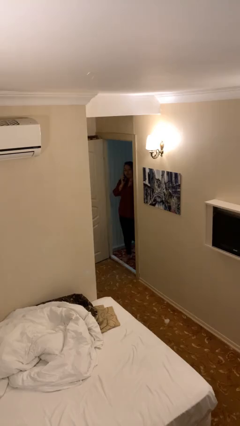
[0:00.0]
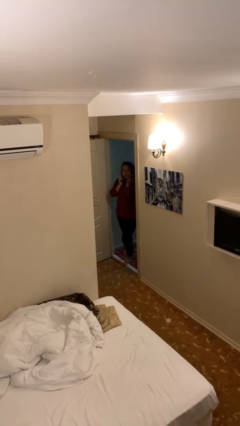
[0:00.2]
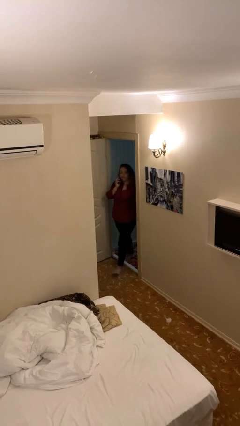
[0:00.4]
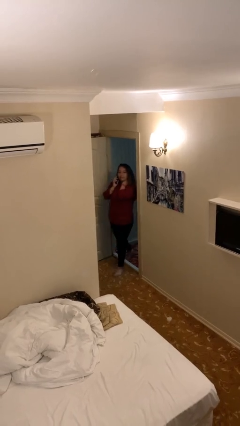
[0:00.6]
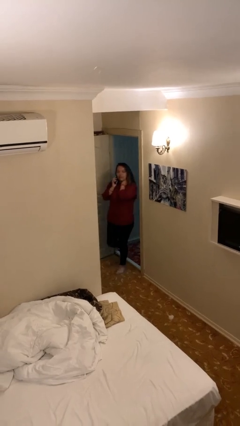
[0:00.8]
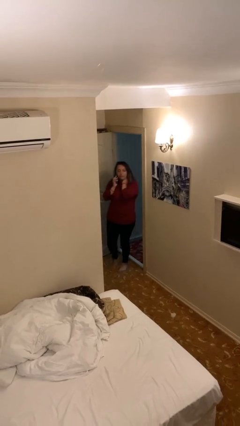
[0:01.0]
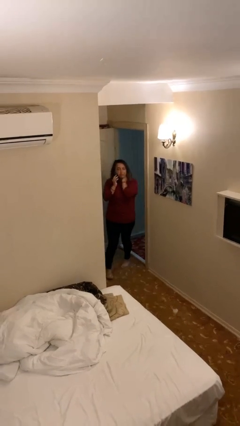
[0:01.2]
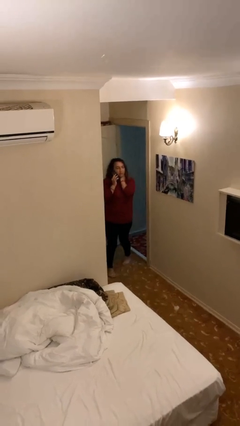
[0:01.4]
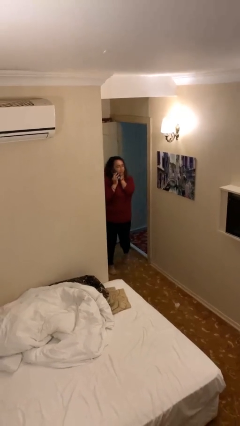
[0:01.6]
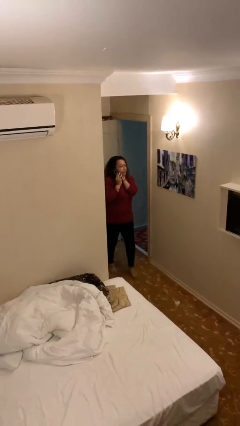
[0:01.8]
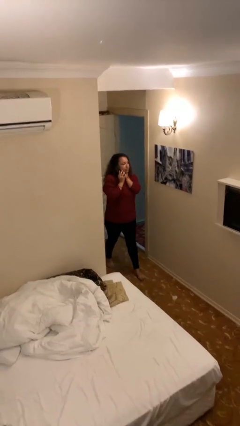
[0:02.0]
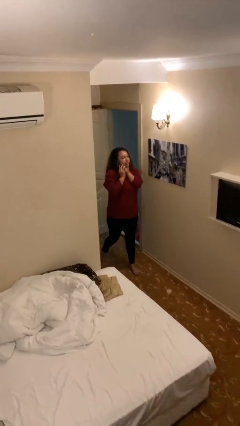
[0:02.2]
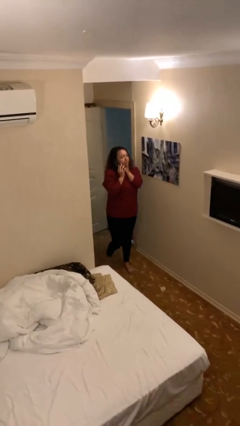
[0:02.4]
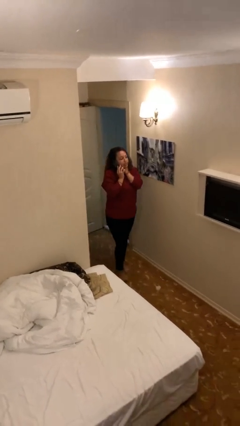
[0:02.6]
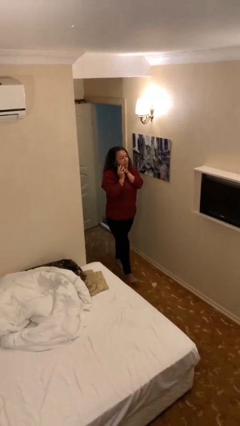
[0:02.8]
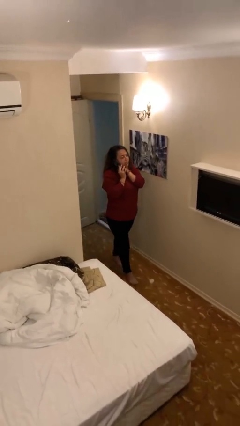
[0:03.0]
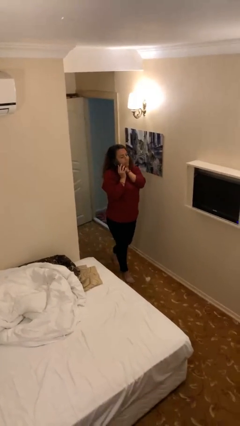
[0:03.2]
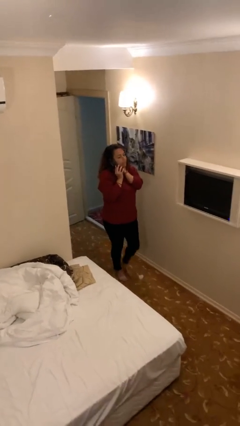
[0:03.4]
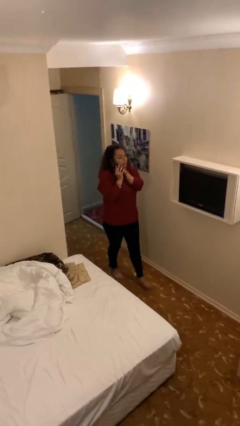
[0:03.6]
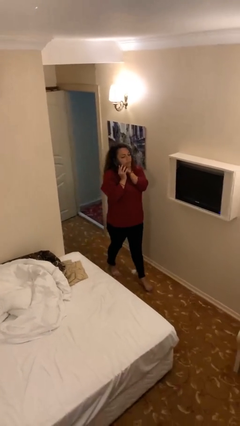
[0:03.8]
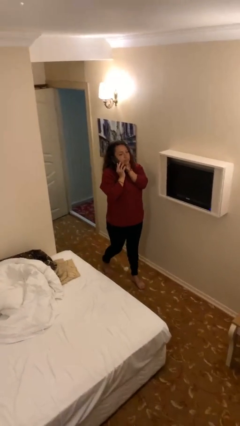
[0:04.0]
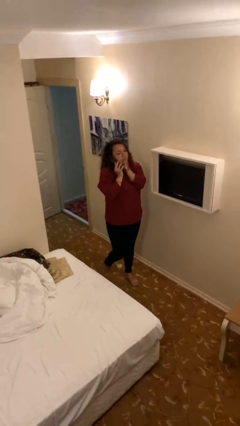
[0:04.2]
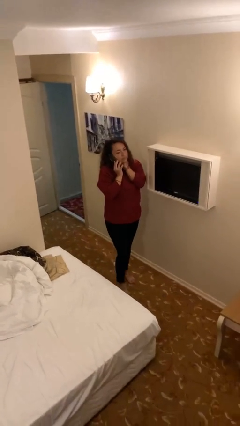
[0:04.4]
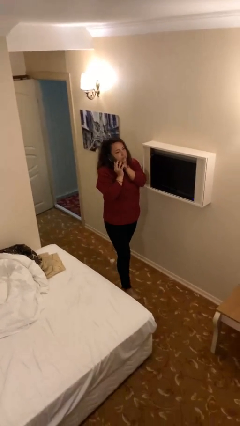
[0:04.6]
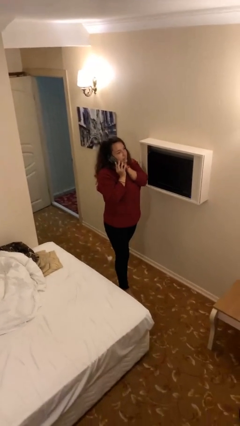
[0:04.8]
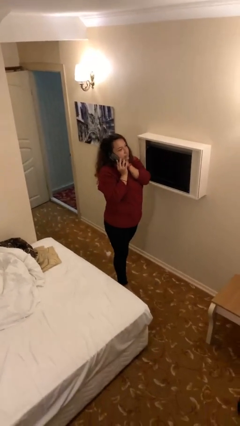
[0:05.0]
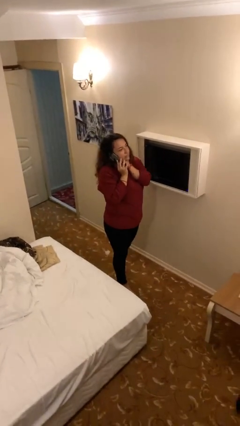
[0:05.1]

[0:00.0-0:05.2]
person enters scene through structure

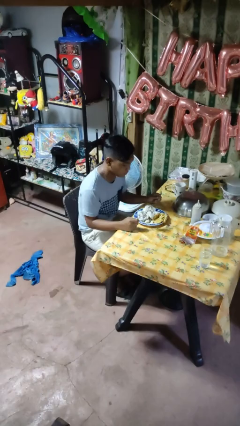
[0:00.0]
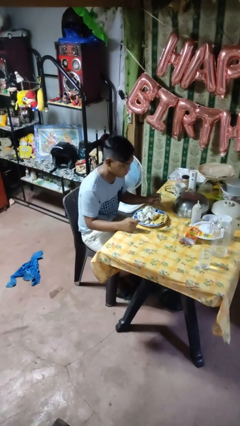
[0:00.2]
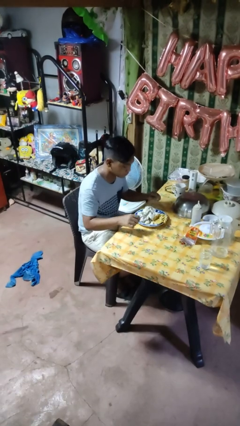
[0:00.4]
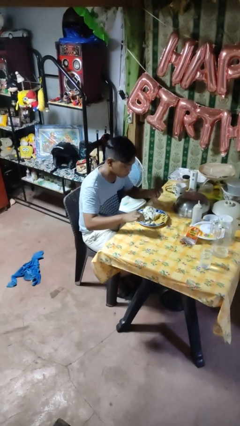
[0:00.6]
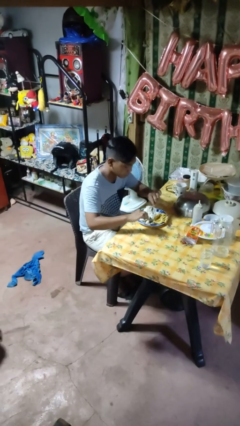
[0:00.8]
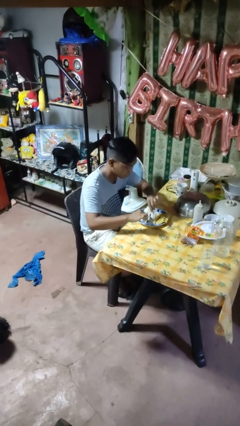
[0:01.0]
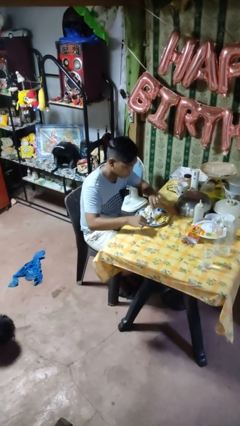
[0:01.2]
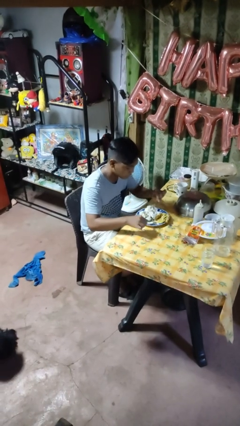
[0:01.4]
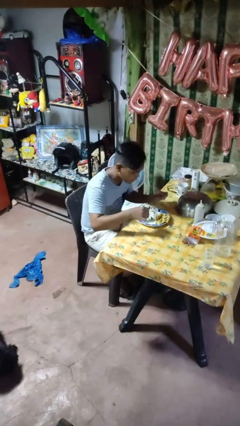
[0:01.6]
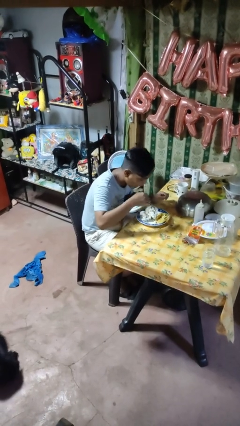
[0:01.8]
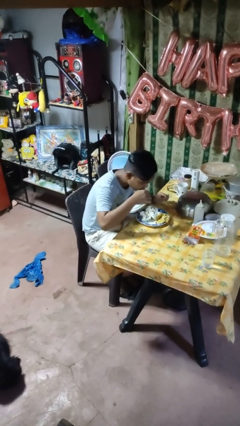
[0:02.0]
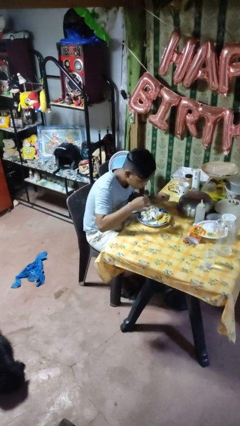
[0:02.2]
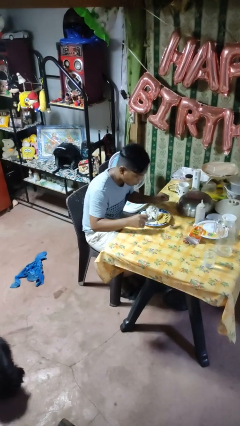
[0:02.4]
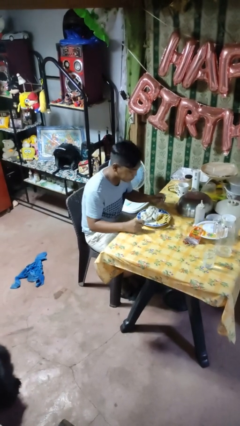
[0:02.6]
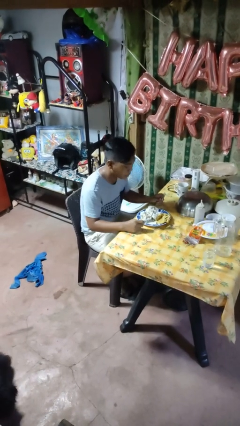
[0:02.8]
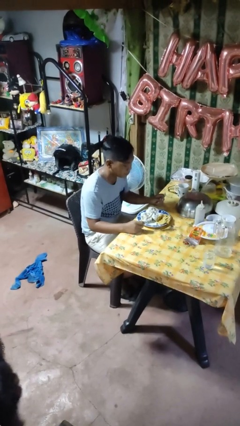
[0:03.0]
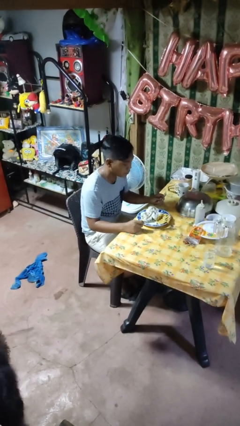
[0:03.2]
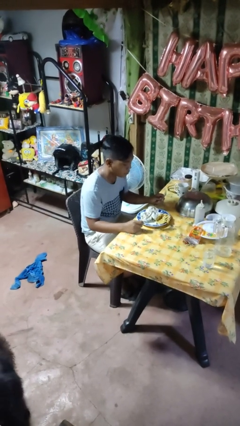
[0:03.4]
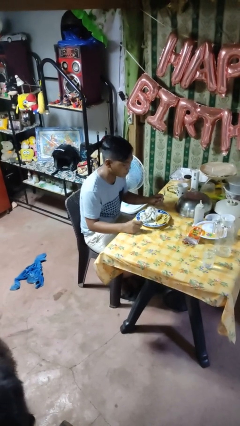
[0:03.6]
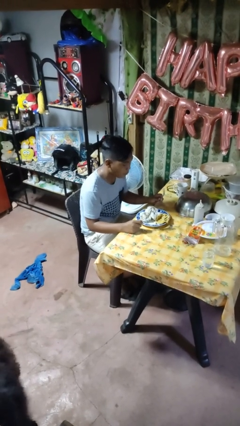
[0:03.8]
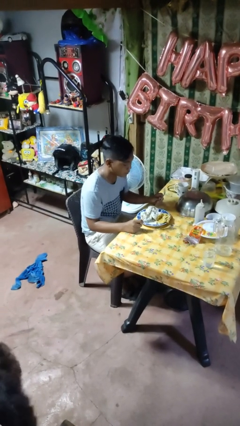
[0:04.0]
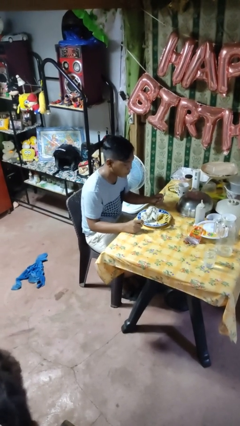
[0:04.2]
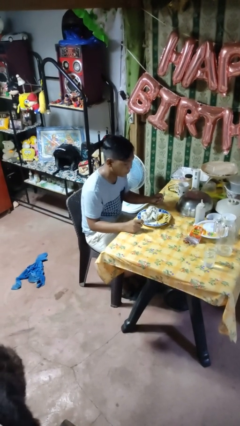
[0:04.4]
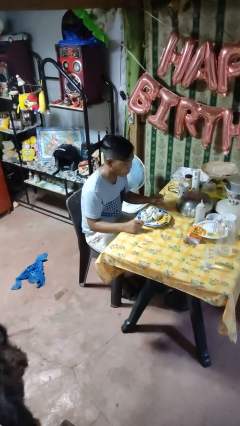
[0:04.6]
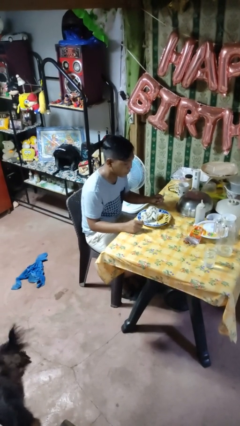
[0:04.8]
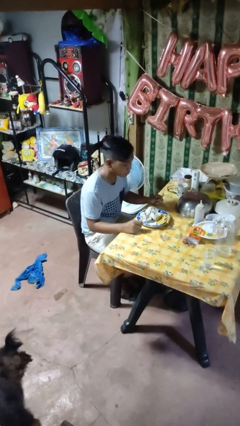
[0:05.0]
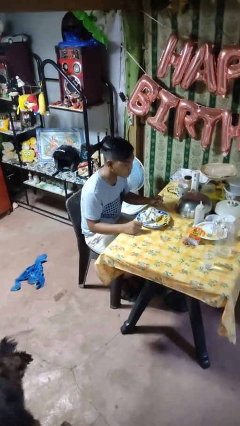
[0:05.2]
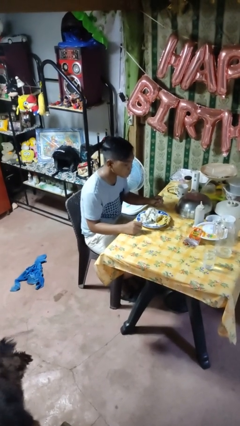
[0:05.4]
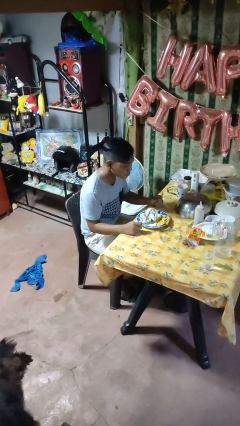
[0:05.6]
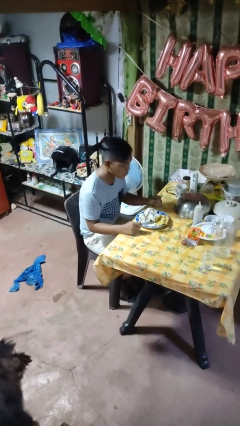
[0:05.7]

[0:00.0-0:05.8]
person eats with utensil

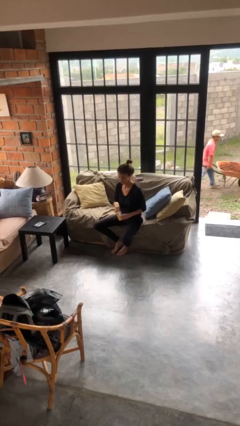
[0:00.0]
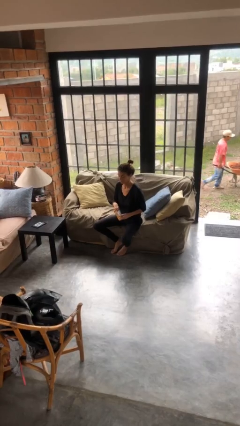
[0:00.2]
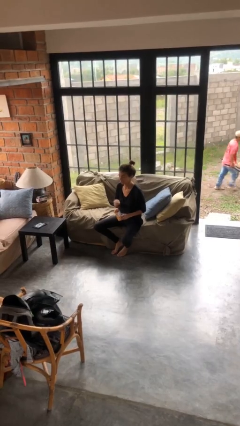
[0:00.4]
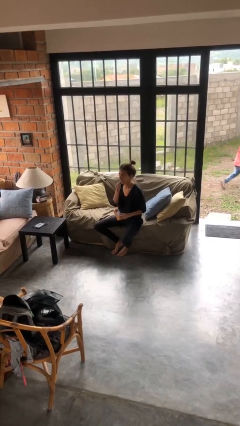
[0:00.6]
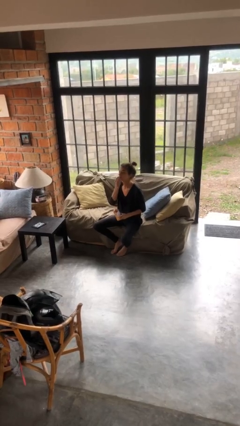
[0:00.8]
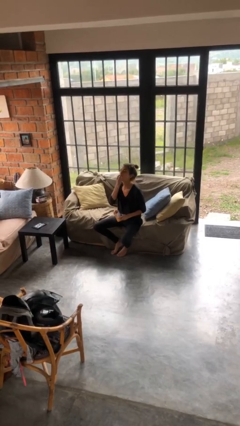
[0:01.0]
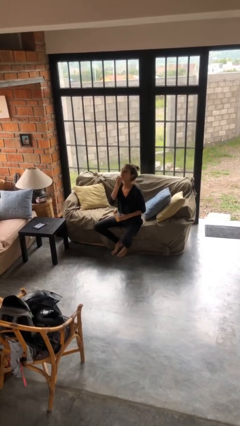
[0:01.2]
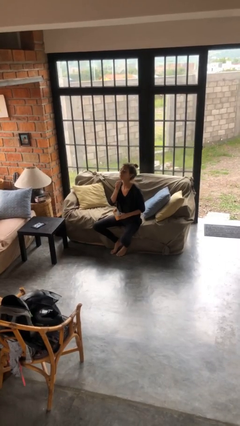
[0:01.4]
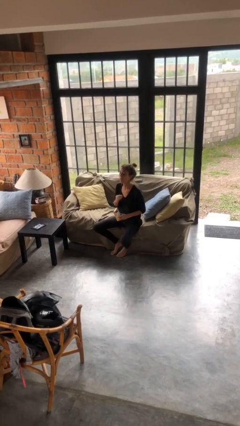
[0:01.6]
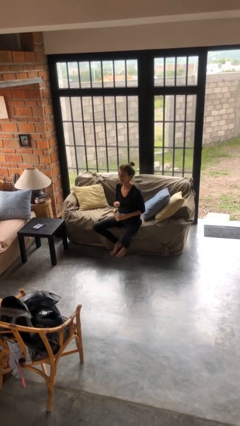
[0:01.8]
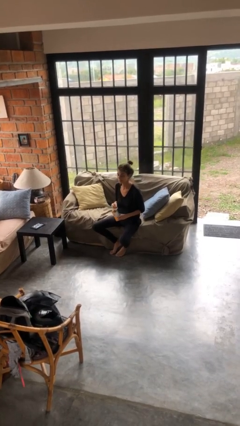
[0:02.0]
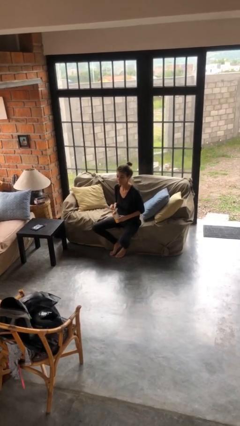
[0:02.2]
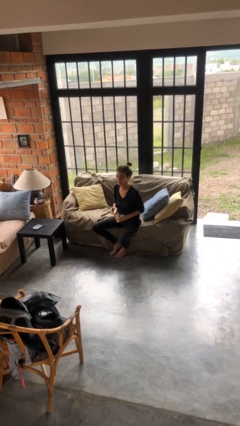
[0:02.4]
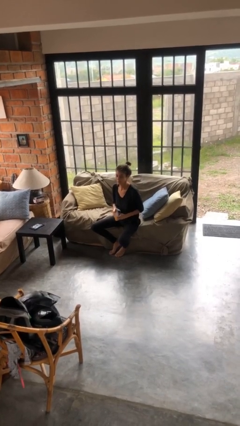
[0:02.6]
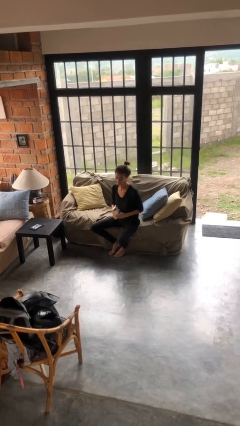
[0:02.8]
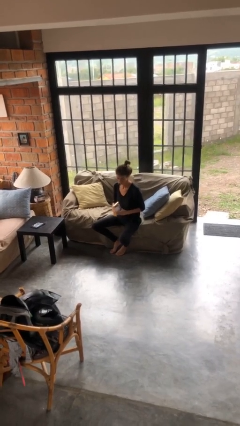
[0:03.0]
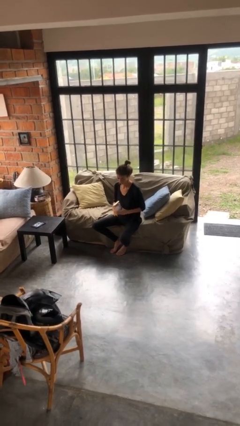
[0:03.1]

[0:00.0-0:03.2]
person eats snack from bag

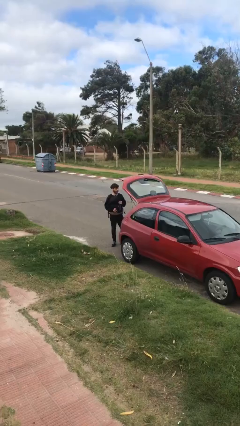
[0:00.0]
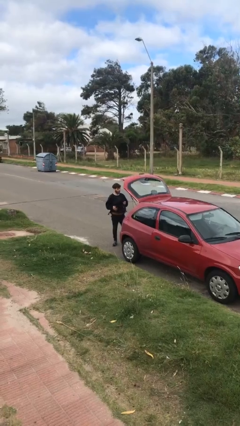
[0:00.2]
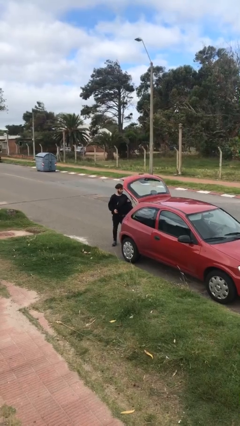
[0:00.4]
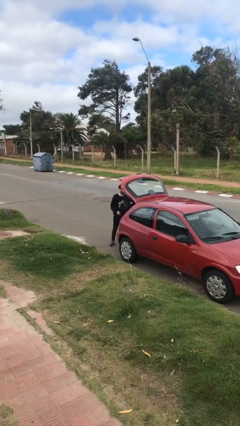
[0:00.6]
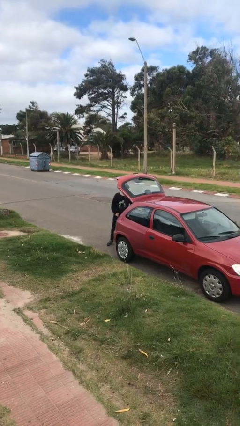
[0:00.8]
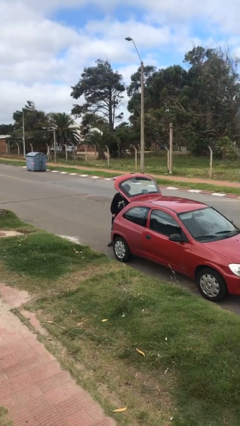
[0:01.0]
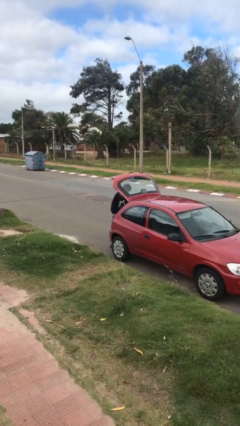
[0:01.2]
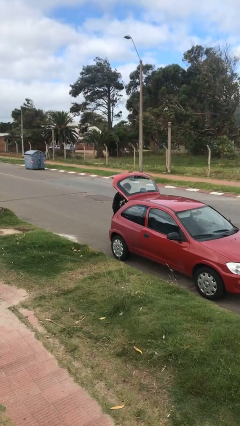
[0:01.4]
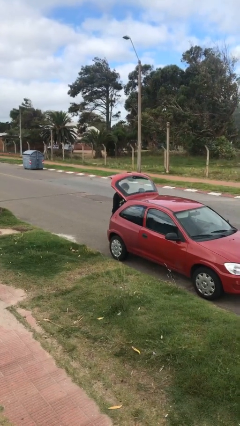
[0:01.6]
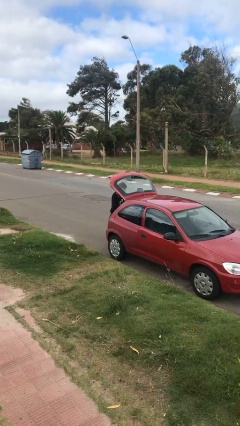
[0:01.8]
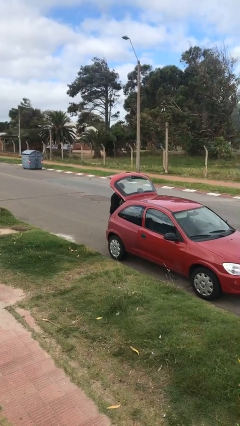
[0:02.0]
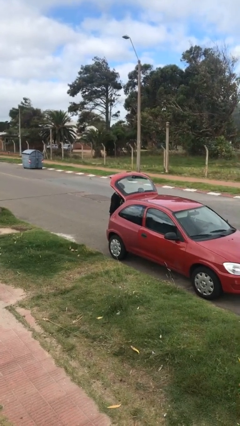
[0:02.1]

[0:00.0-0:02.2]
person loads car

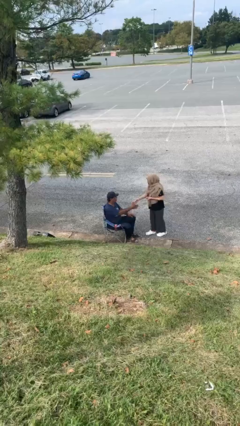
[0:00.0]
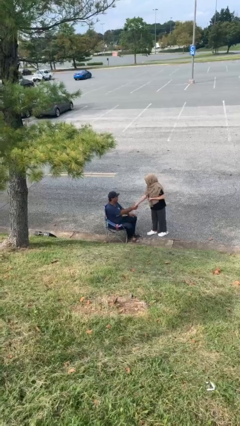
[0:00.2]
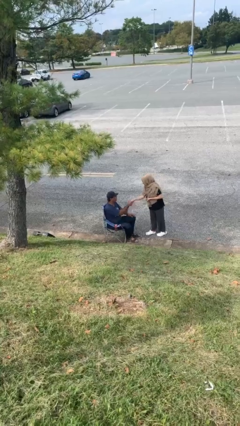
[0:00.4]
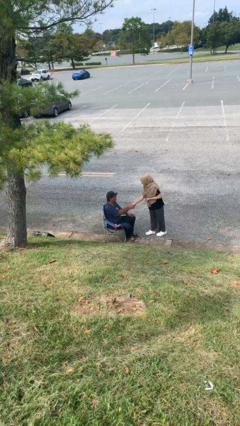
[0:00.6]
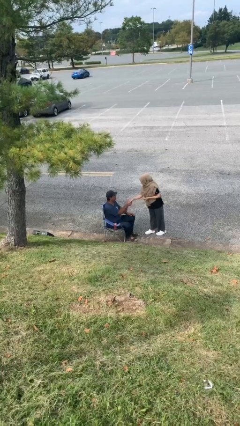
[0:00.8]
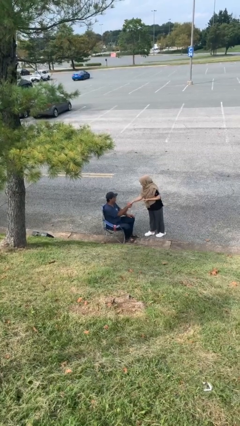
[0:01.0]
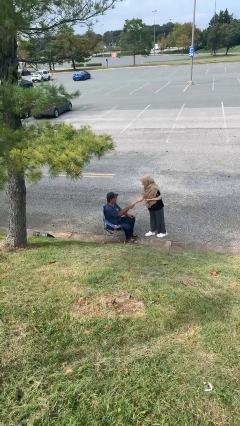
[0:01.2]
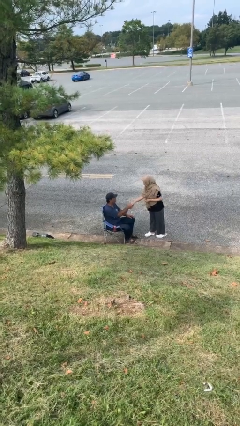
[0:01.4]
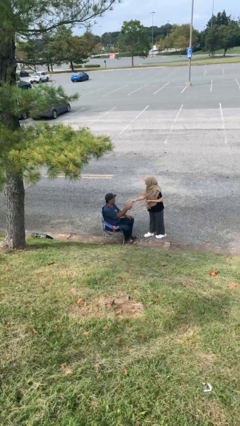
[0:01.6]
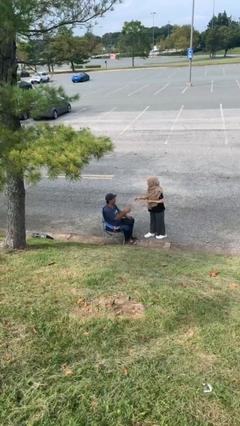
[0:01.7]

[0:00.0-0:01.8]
person shakes hand
